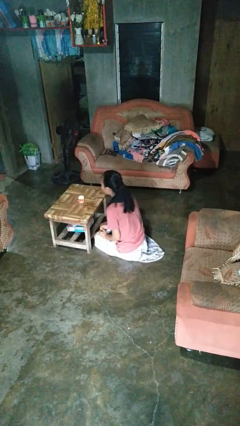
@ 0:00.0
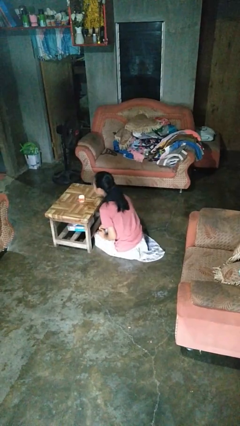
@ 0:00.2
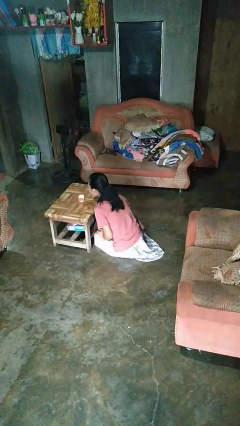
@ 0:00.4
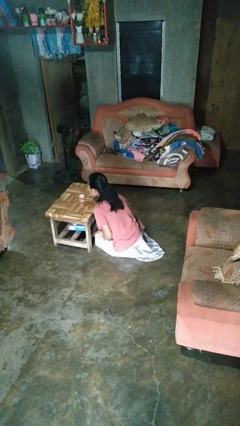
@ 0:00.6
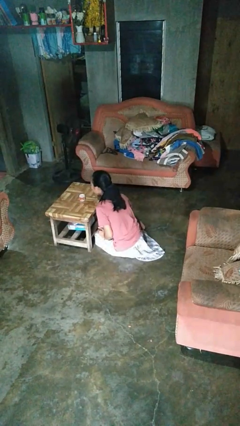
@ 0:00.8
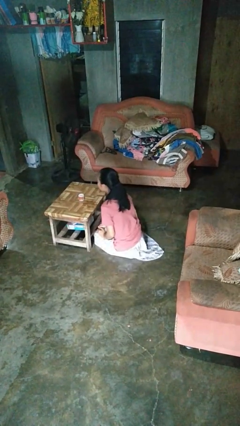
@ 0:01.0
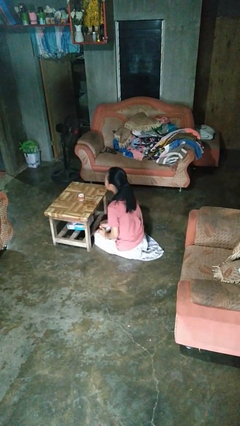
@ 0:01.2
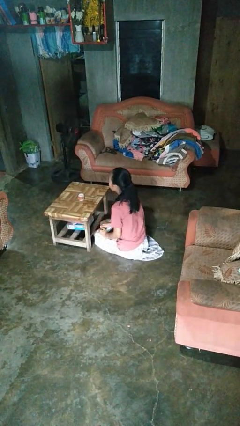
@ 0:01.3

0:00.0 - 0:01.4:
person extinguishes candle

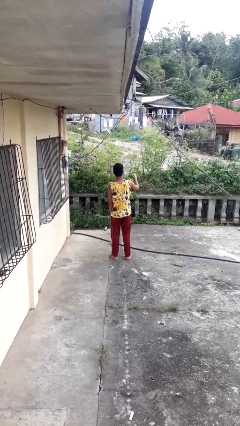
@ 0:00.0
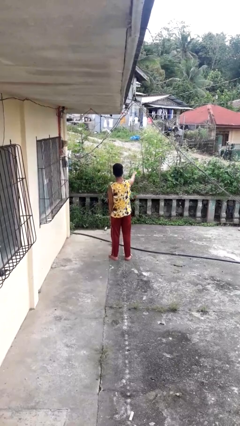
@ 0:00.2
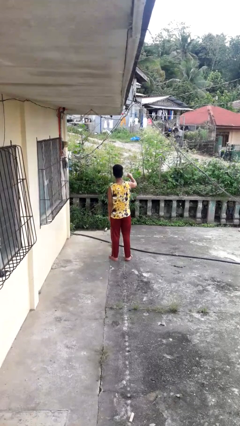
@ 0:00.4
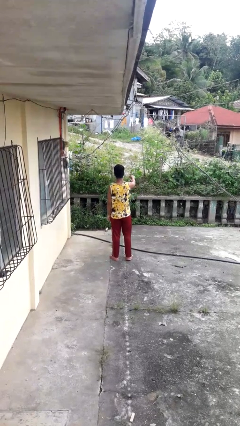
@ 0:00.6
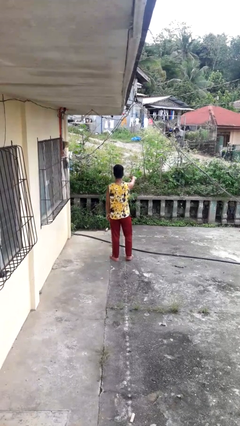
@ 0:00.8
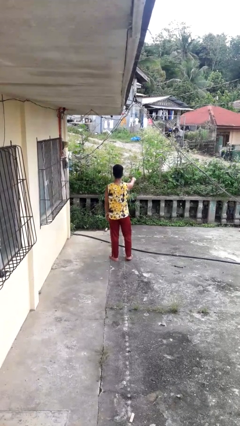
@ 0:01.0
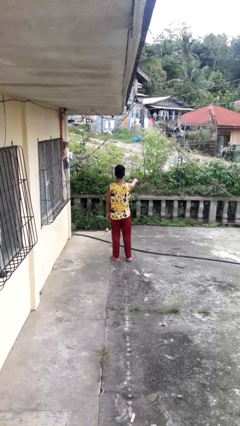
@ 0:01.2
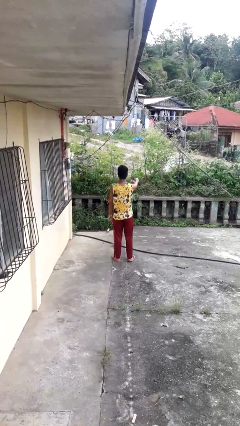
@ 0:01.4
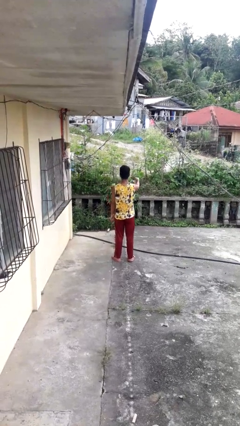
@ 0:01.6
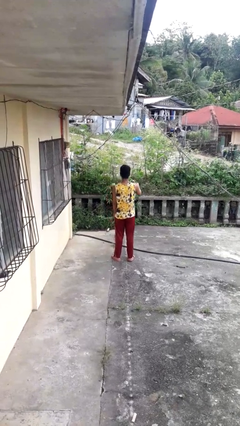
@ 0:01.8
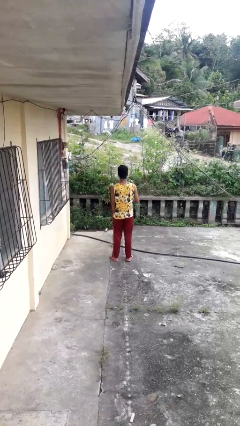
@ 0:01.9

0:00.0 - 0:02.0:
person punches

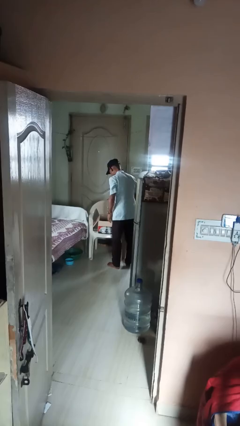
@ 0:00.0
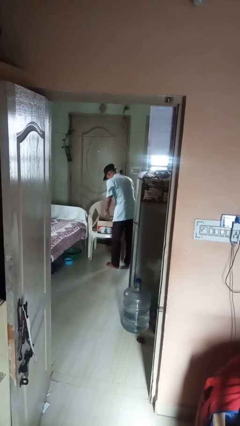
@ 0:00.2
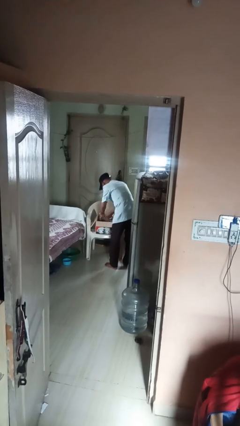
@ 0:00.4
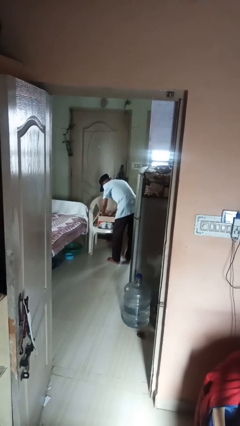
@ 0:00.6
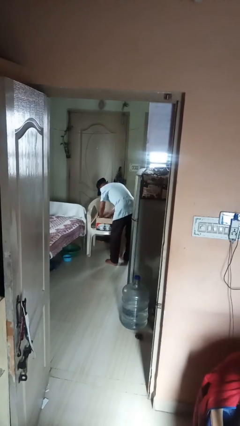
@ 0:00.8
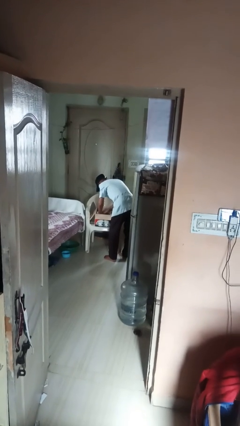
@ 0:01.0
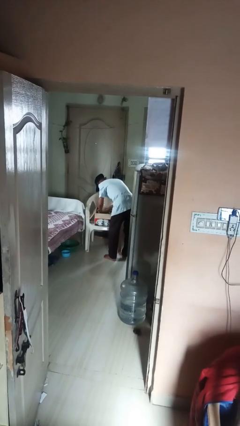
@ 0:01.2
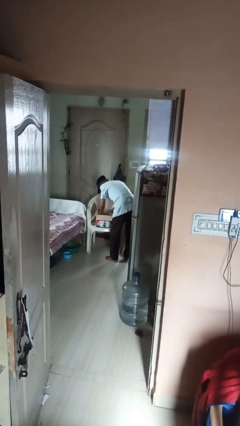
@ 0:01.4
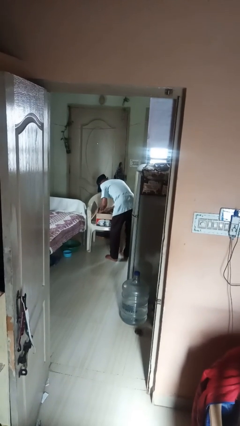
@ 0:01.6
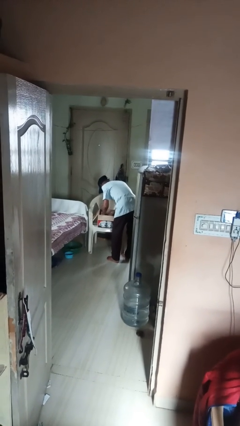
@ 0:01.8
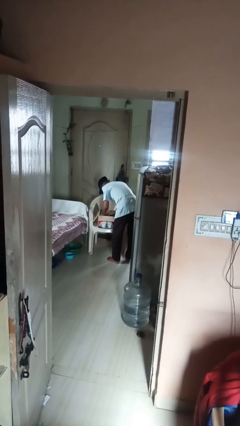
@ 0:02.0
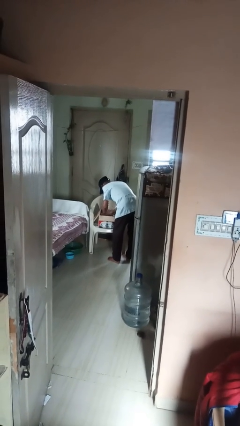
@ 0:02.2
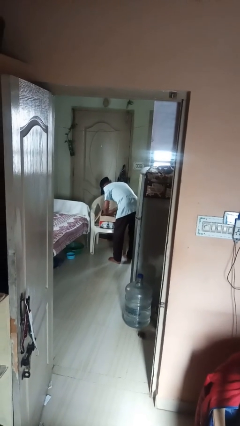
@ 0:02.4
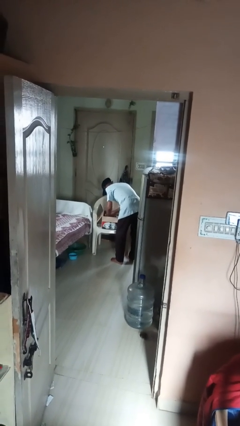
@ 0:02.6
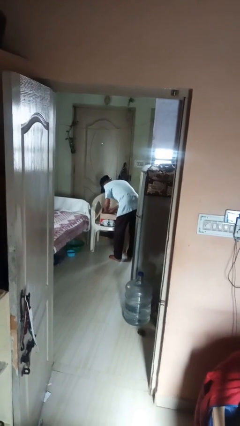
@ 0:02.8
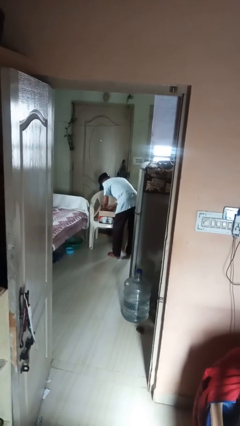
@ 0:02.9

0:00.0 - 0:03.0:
person searches in box

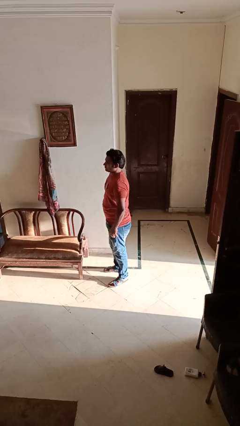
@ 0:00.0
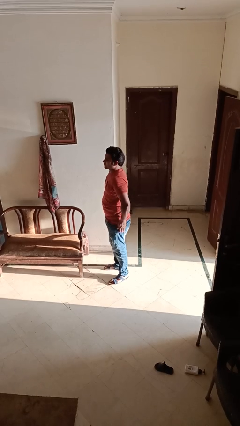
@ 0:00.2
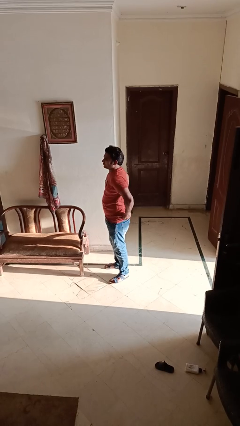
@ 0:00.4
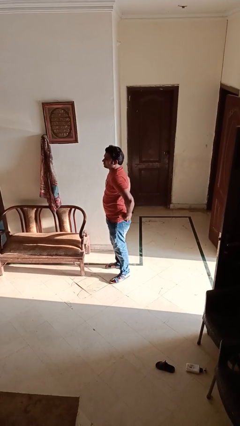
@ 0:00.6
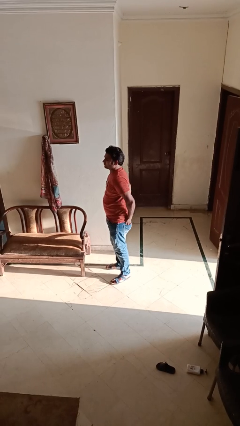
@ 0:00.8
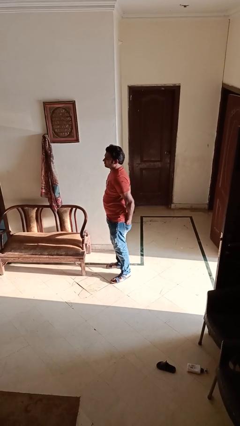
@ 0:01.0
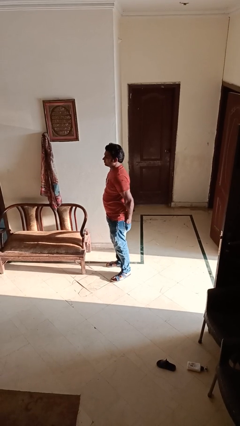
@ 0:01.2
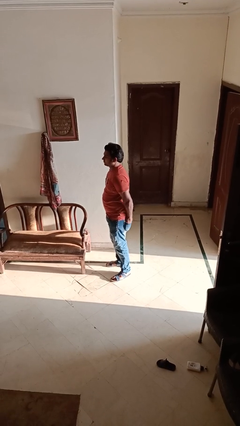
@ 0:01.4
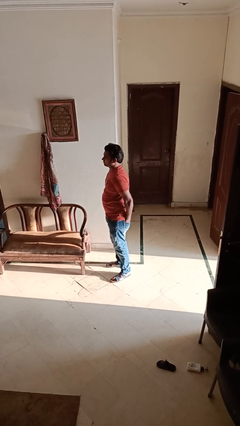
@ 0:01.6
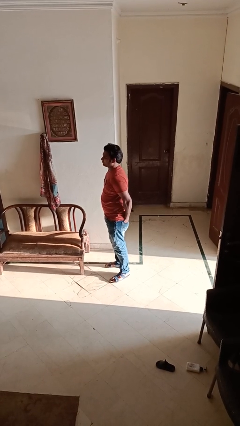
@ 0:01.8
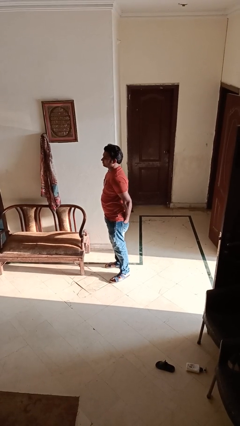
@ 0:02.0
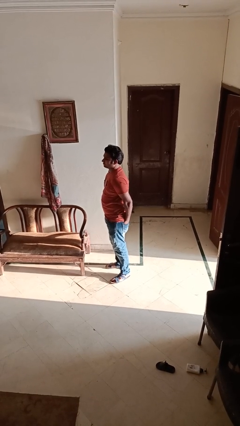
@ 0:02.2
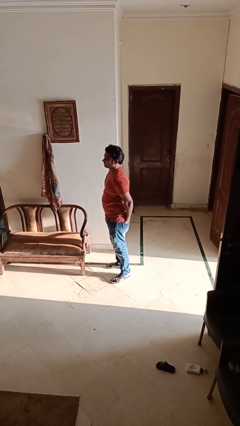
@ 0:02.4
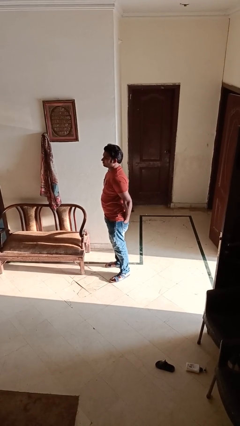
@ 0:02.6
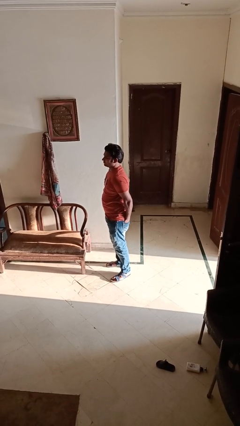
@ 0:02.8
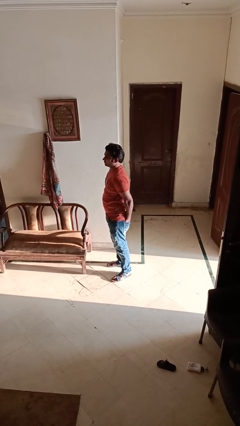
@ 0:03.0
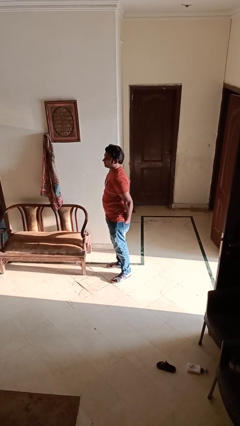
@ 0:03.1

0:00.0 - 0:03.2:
person puts hands in back pockets

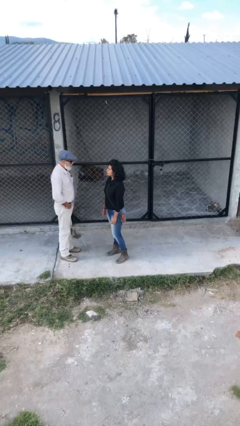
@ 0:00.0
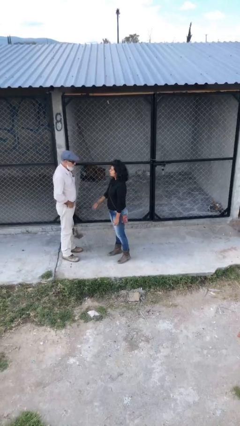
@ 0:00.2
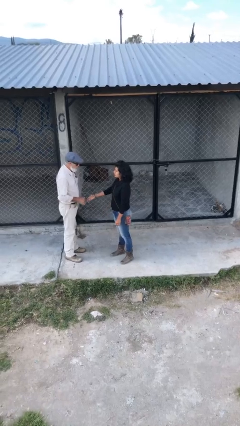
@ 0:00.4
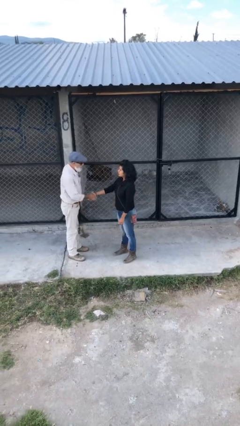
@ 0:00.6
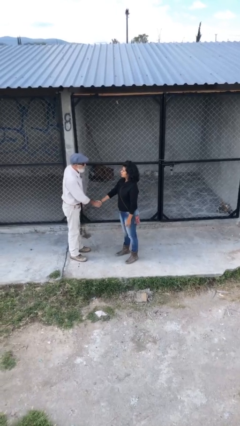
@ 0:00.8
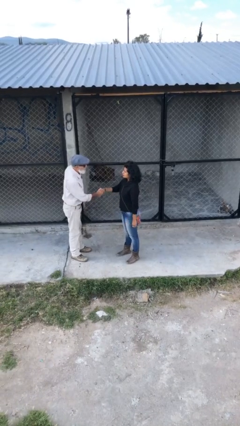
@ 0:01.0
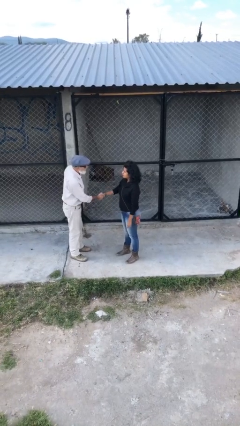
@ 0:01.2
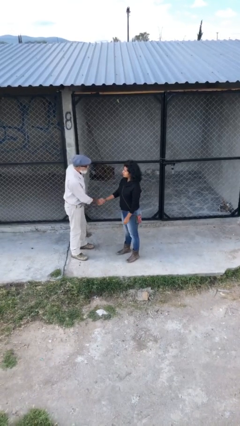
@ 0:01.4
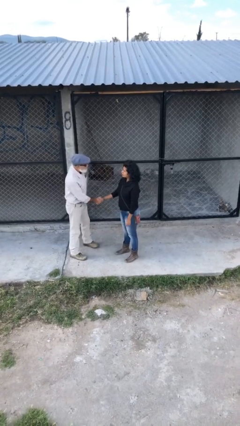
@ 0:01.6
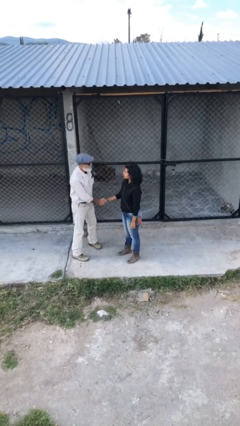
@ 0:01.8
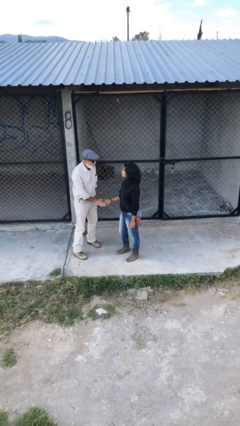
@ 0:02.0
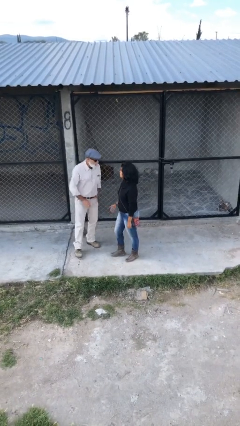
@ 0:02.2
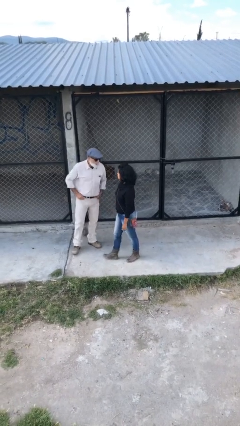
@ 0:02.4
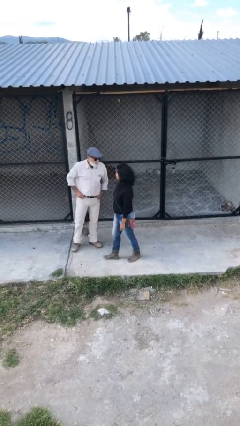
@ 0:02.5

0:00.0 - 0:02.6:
person shakes hand

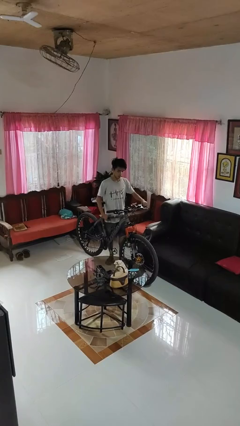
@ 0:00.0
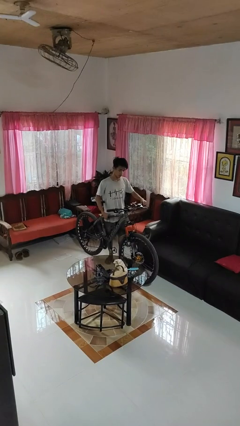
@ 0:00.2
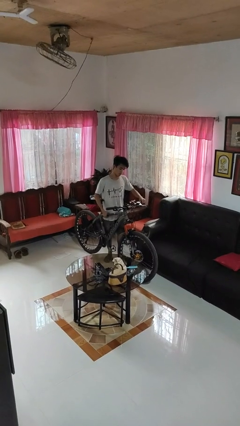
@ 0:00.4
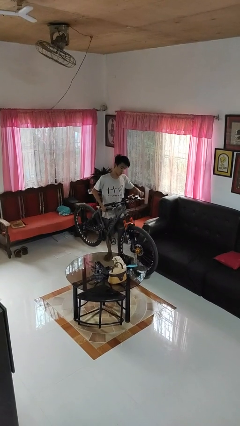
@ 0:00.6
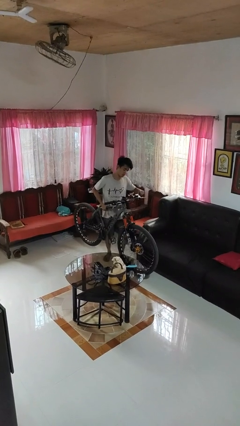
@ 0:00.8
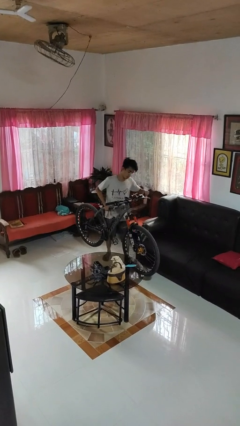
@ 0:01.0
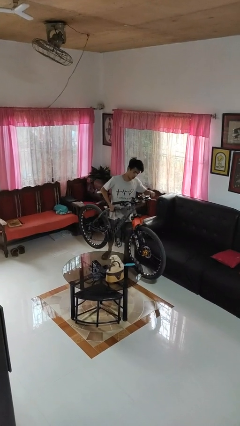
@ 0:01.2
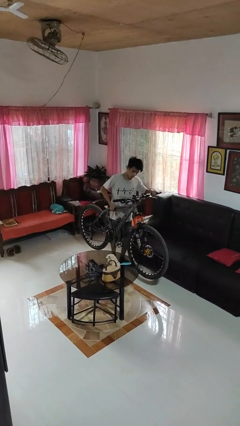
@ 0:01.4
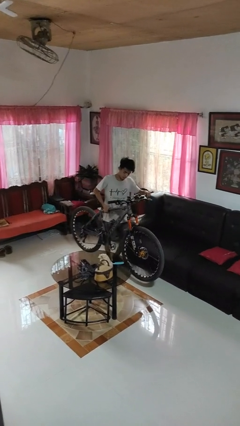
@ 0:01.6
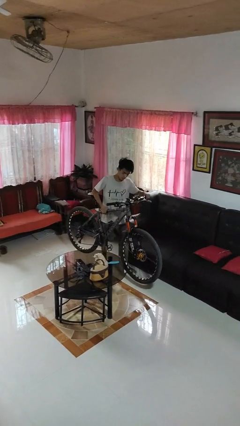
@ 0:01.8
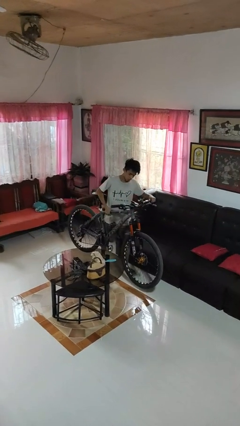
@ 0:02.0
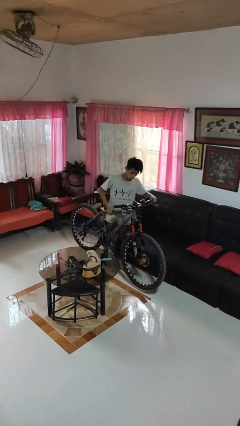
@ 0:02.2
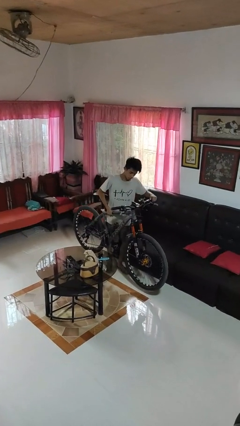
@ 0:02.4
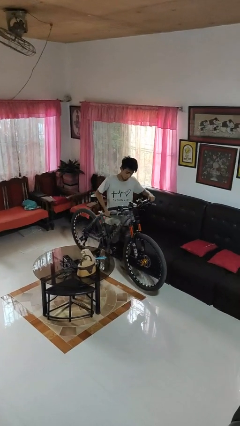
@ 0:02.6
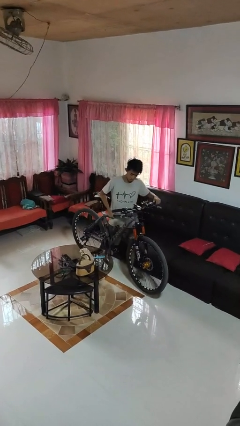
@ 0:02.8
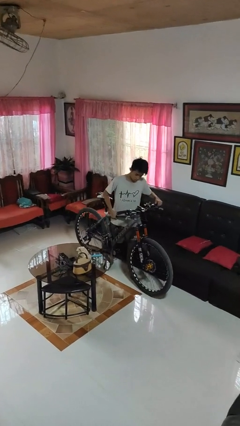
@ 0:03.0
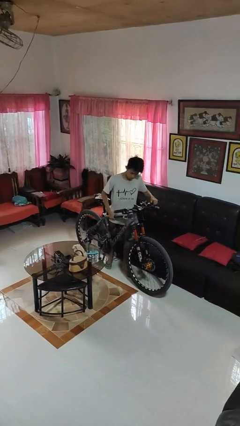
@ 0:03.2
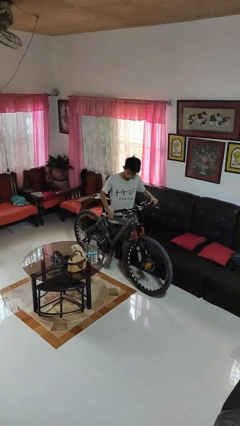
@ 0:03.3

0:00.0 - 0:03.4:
person carries bicycle

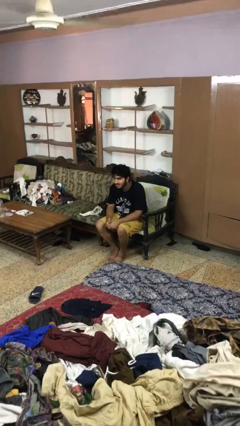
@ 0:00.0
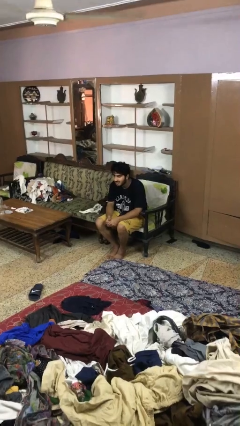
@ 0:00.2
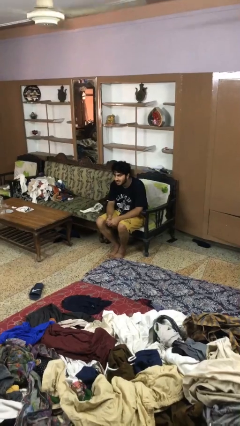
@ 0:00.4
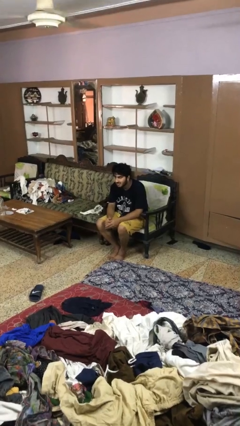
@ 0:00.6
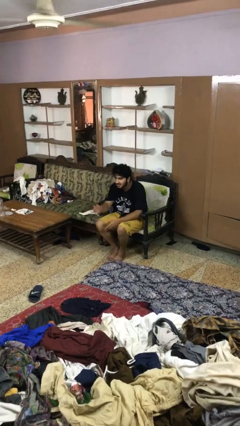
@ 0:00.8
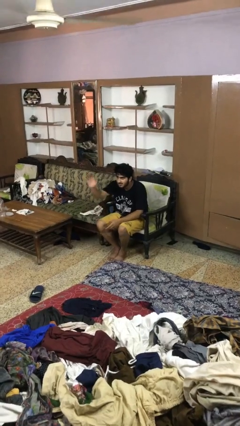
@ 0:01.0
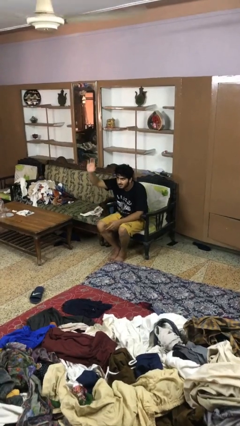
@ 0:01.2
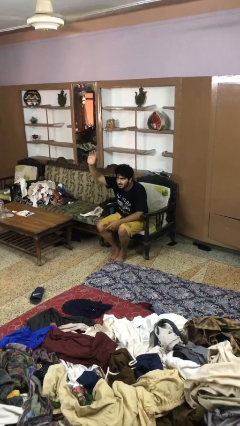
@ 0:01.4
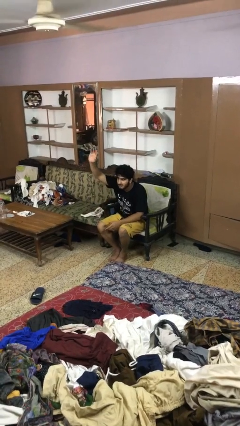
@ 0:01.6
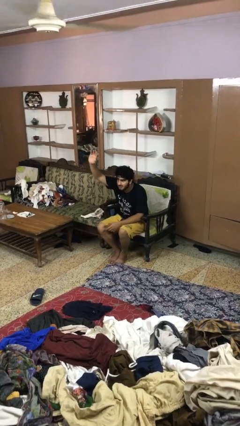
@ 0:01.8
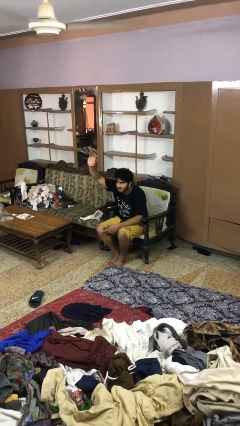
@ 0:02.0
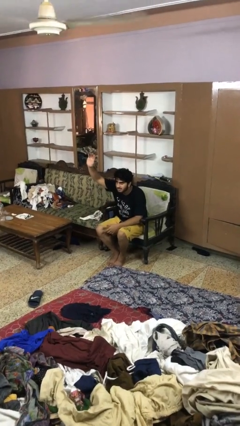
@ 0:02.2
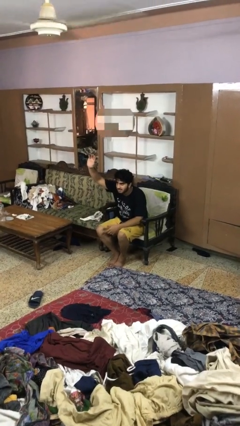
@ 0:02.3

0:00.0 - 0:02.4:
person gestures raise hand
